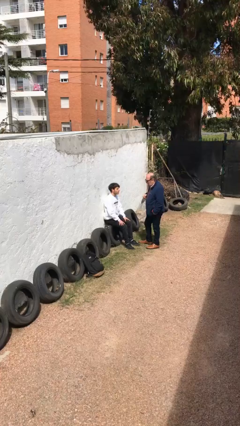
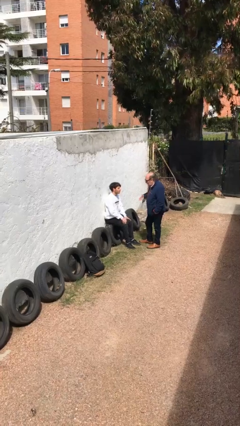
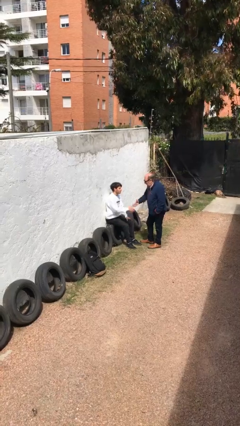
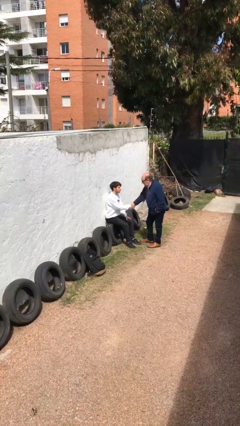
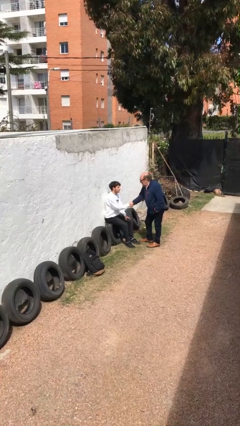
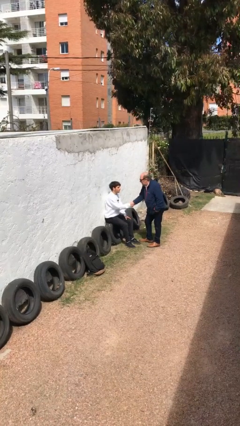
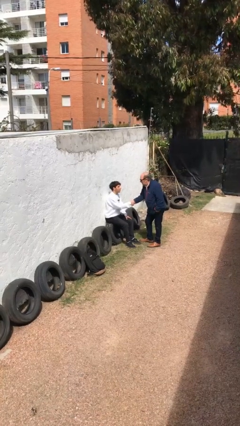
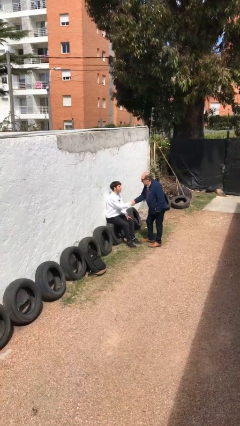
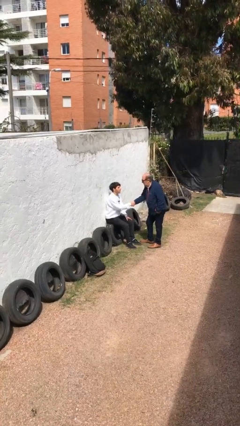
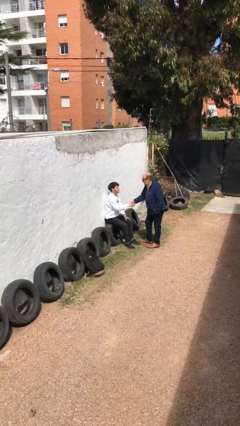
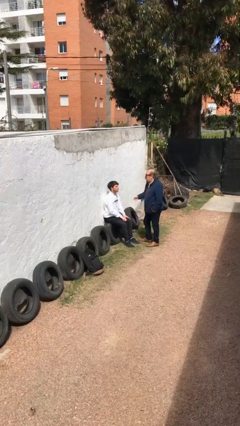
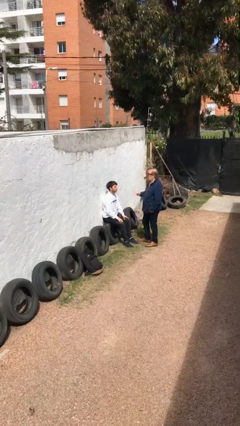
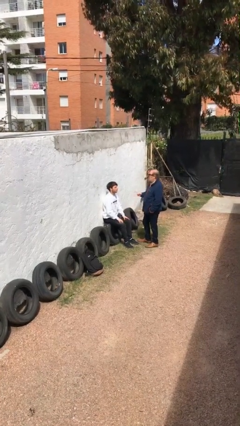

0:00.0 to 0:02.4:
person shakes hand

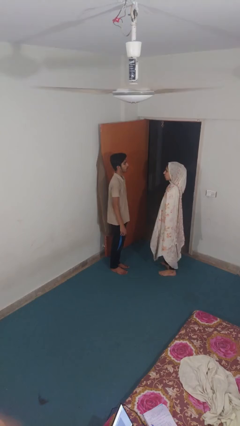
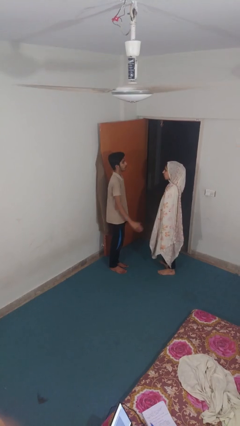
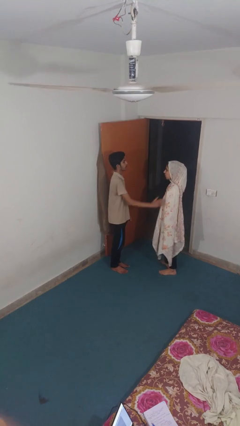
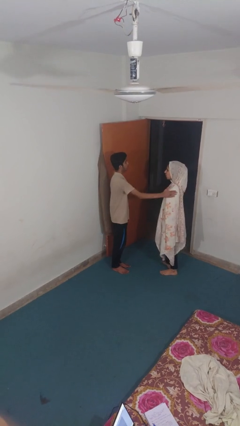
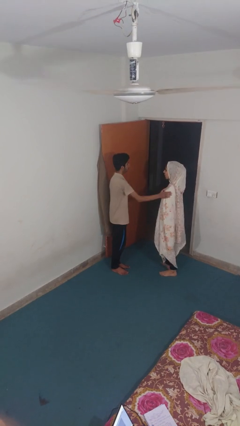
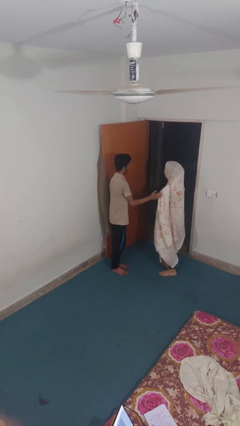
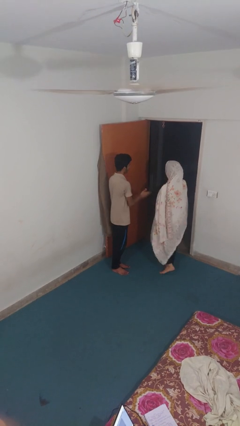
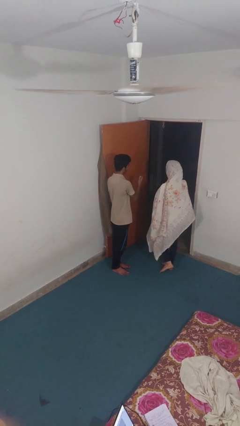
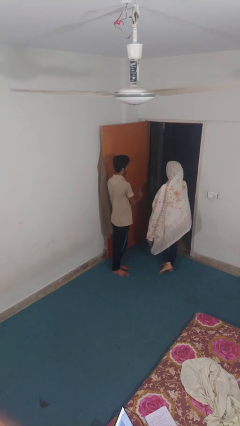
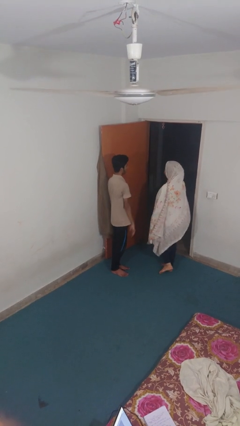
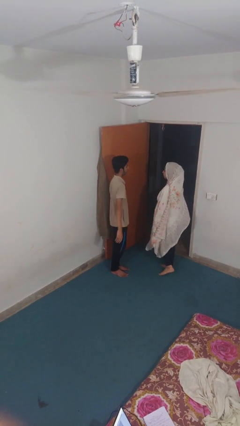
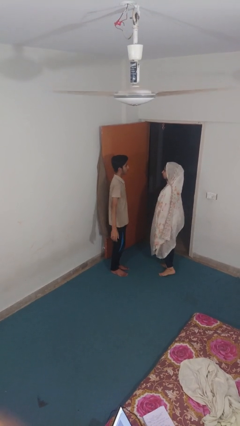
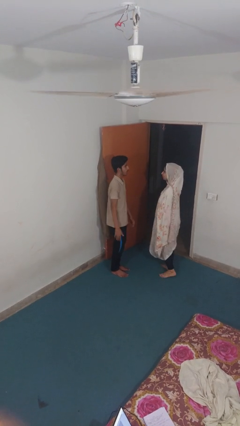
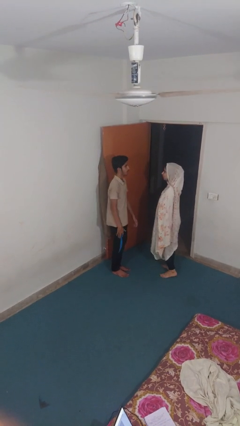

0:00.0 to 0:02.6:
person shoves person

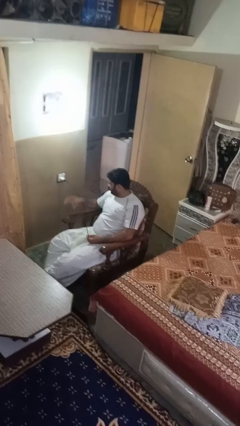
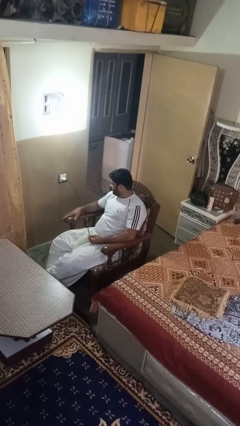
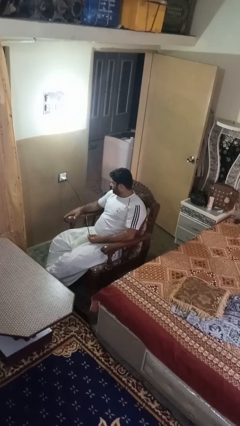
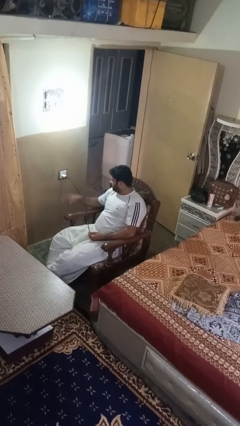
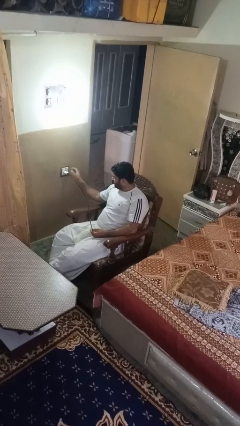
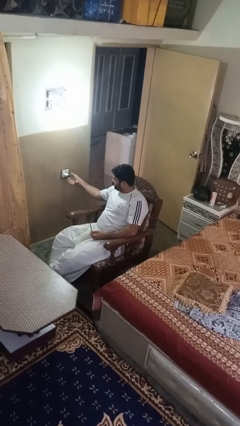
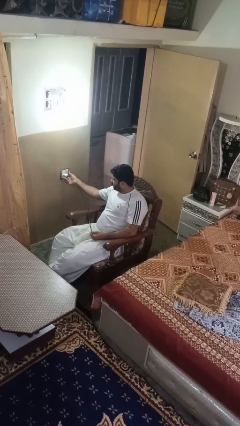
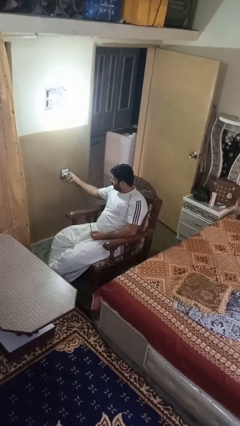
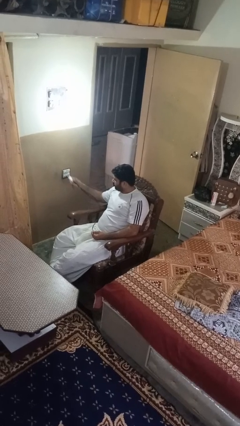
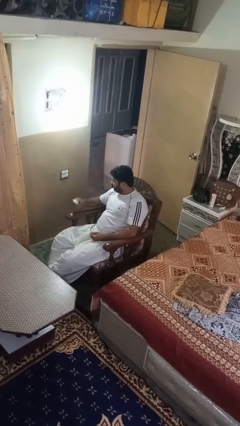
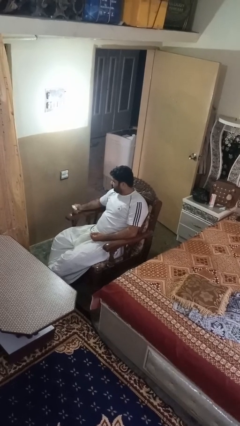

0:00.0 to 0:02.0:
person unplugs from electrical socket

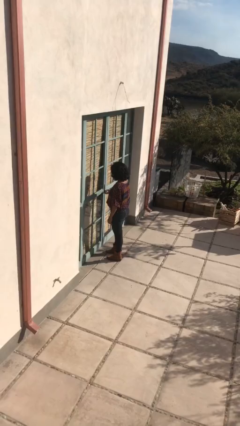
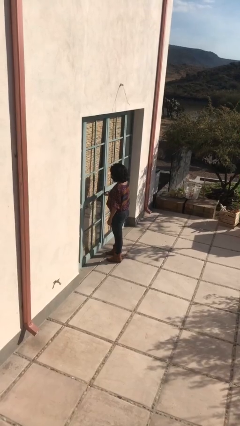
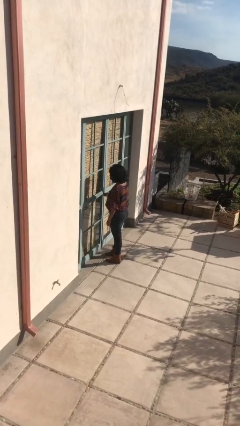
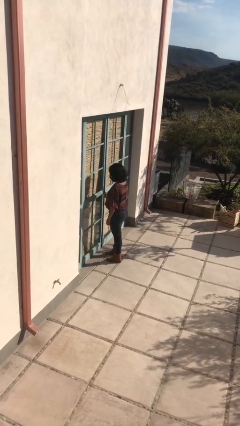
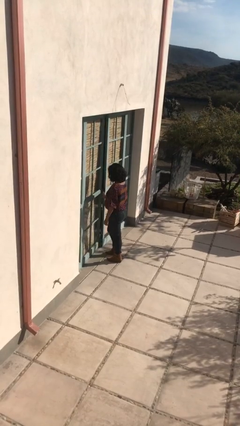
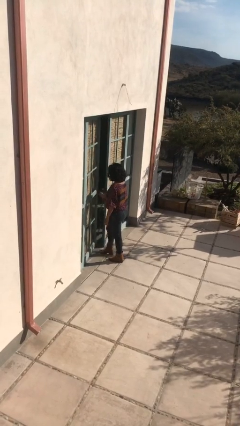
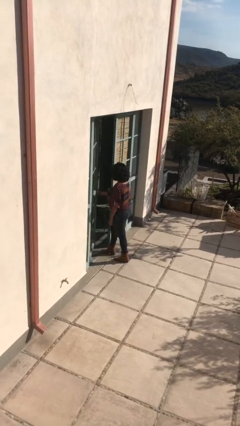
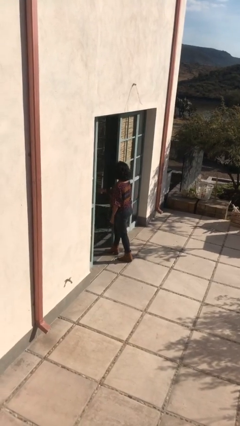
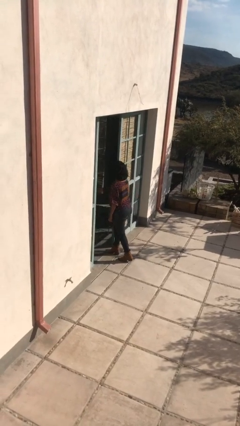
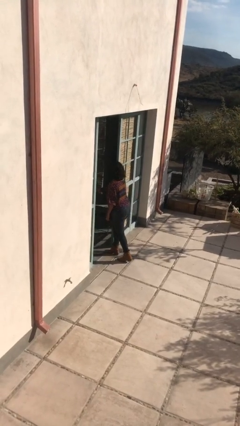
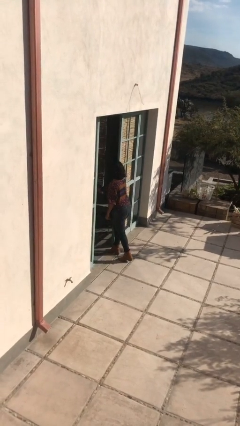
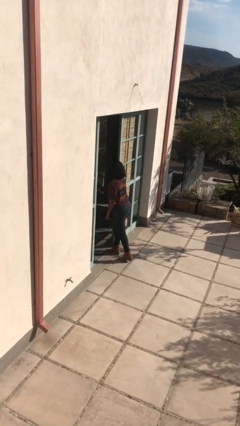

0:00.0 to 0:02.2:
person opens facility door

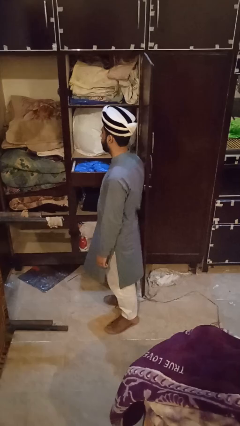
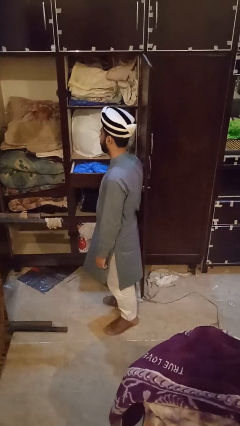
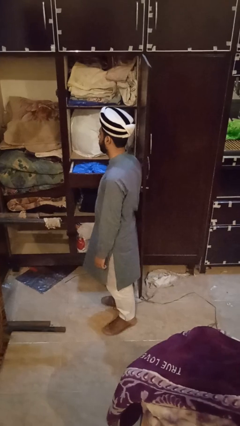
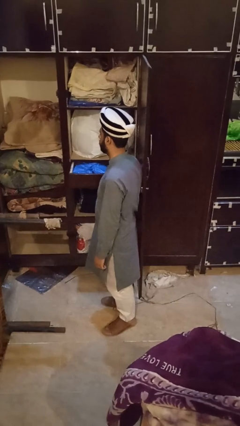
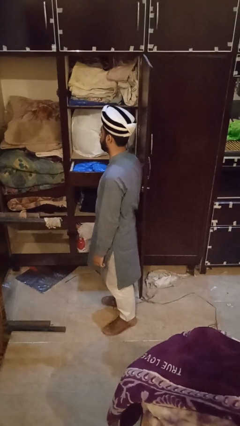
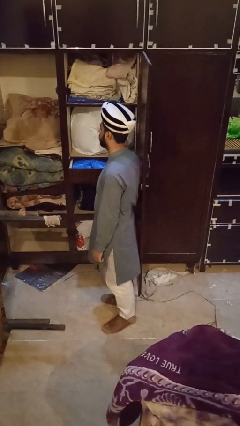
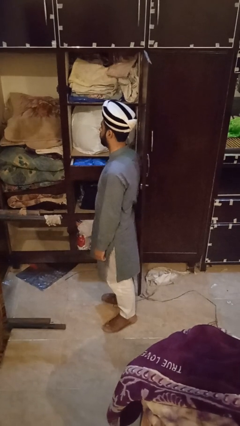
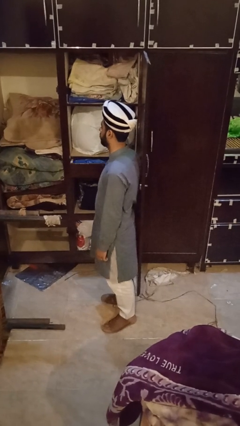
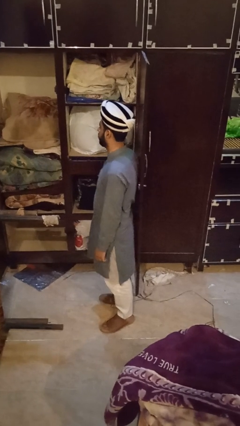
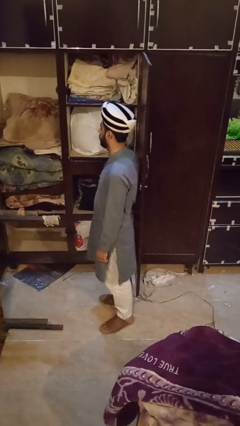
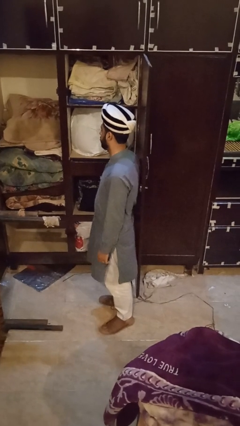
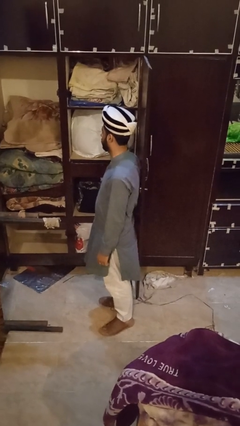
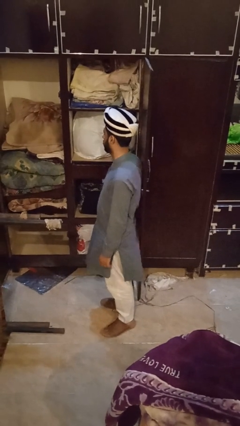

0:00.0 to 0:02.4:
person closes dresser drawer

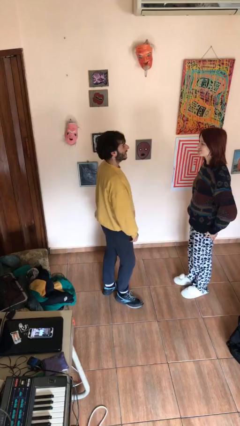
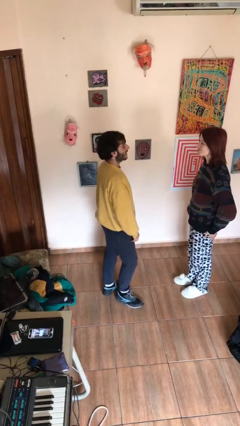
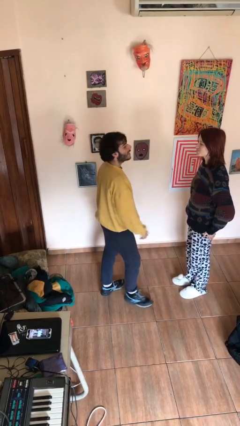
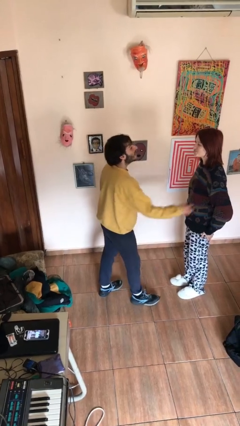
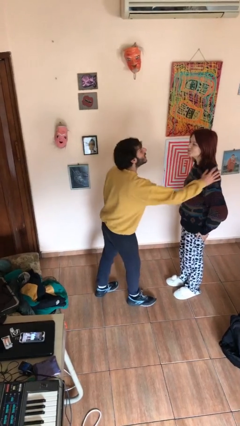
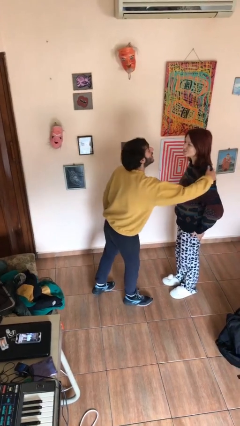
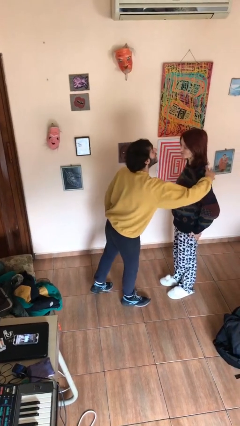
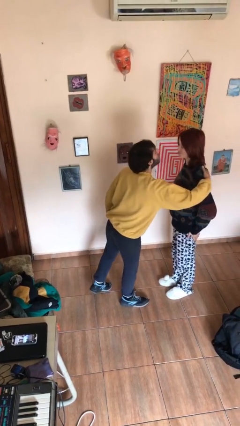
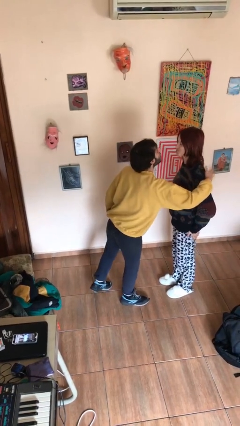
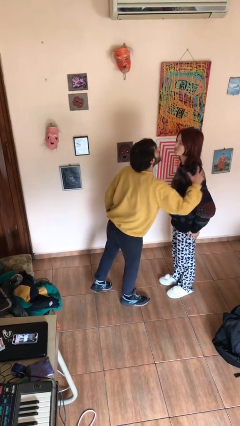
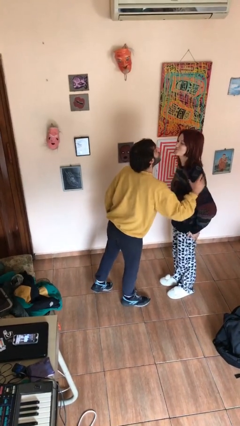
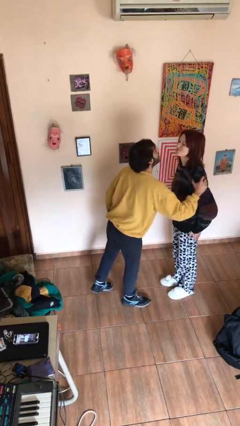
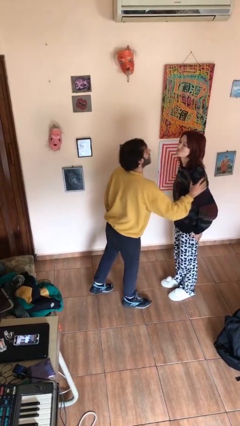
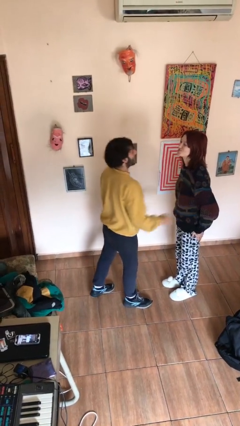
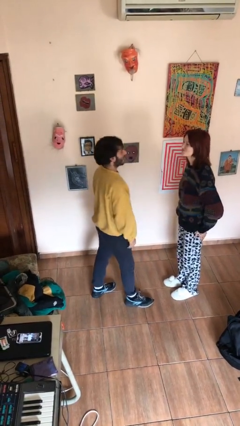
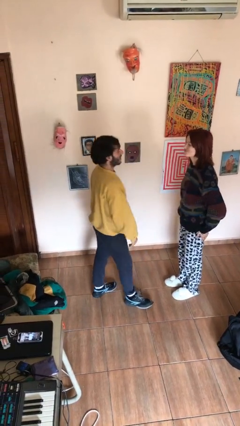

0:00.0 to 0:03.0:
person pounds shoulders of person

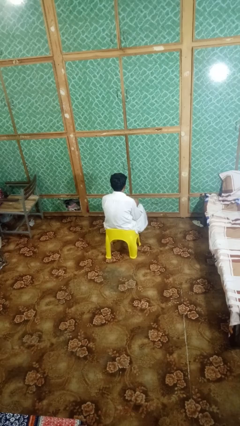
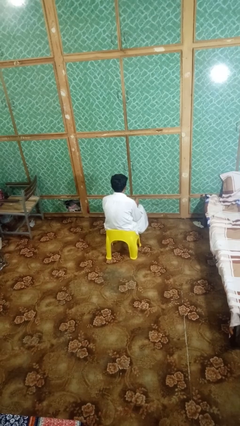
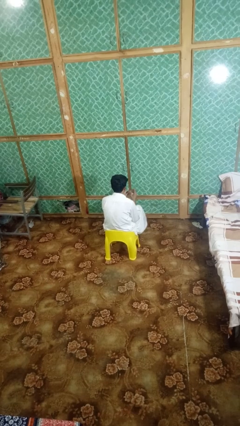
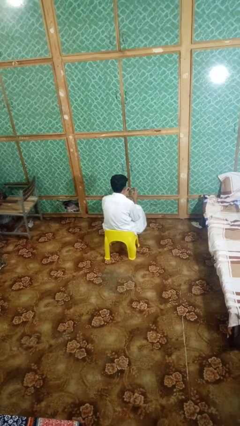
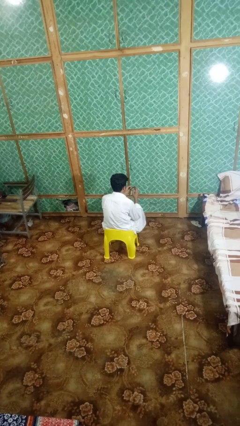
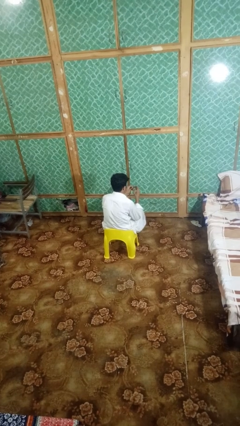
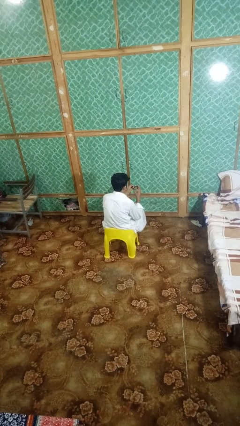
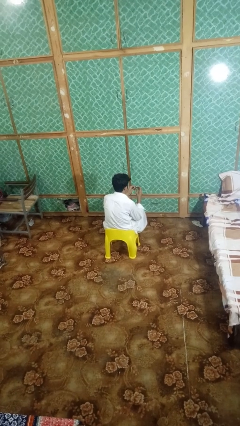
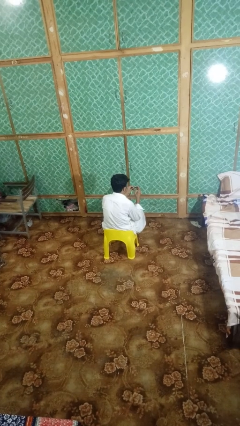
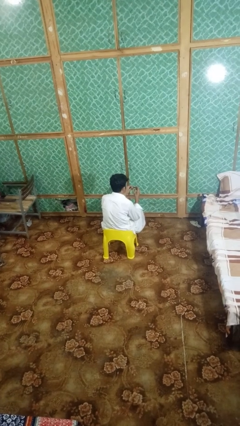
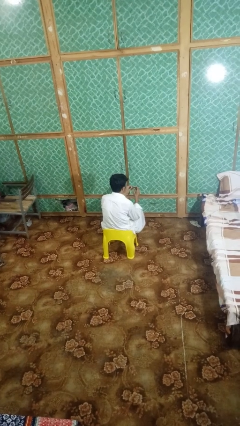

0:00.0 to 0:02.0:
person clips fingernails
